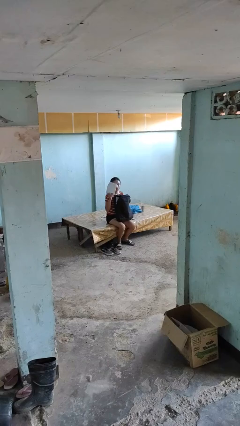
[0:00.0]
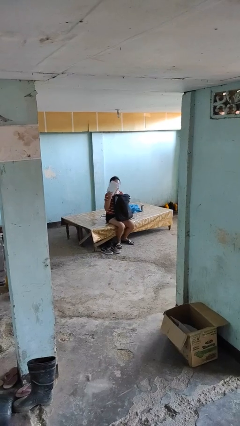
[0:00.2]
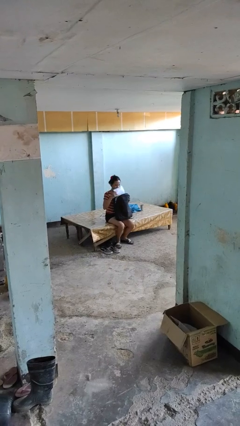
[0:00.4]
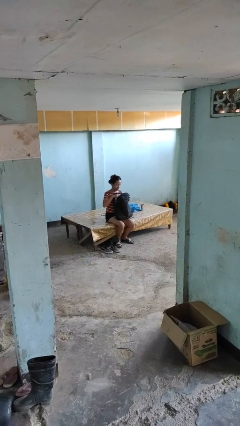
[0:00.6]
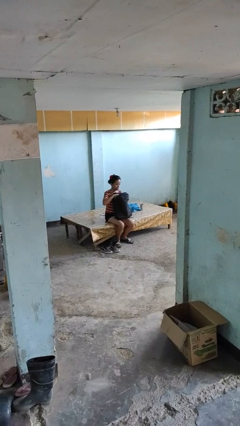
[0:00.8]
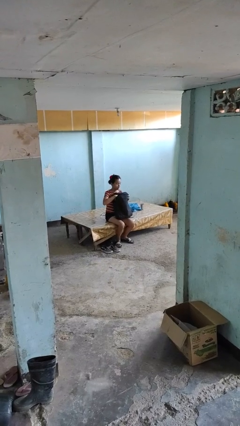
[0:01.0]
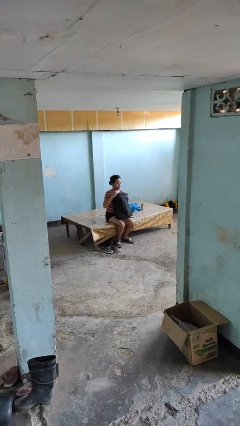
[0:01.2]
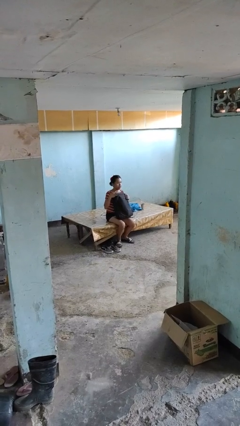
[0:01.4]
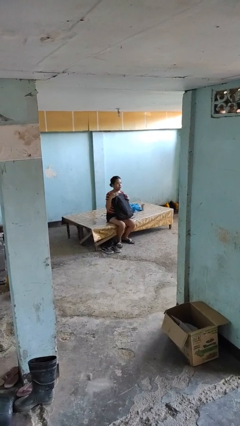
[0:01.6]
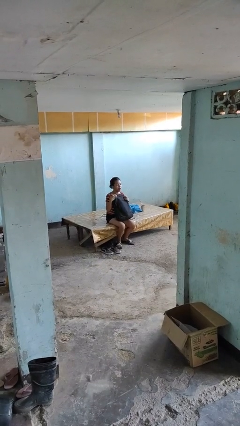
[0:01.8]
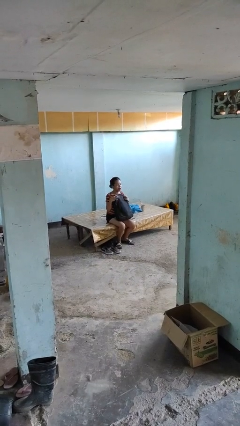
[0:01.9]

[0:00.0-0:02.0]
person puts object into backpack

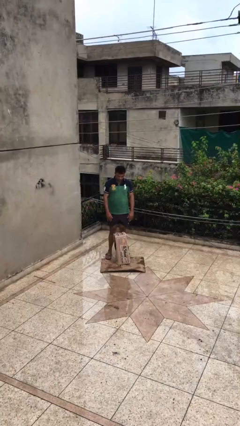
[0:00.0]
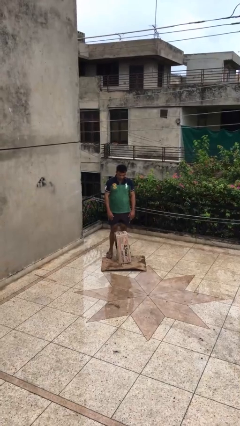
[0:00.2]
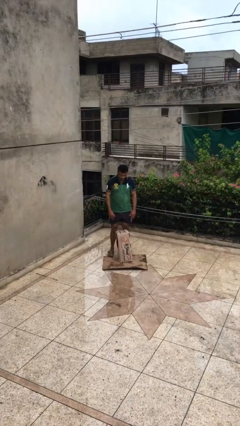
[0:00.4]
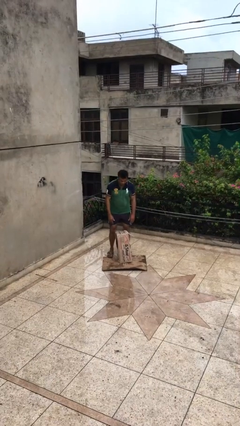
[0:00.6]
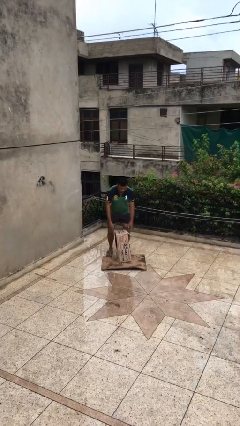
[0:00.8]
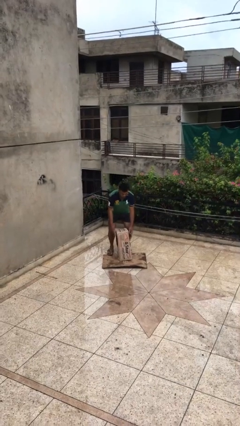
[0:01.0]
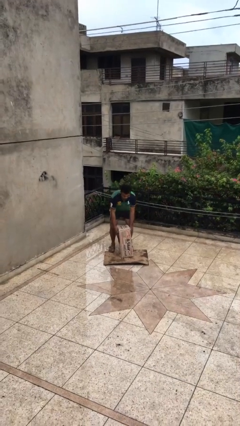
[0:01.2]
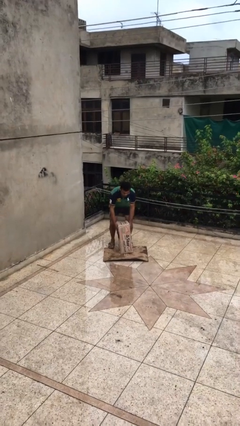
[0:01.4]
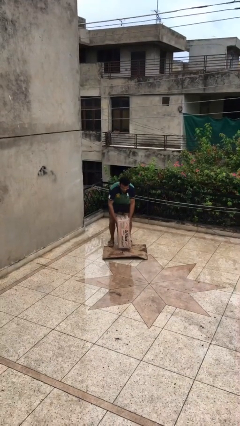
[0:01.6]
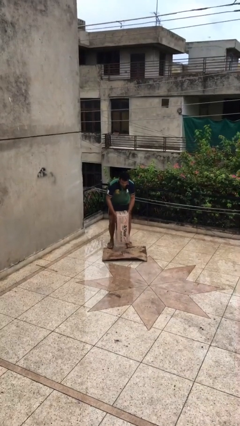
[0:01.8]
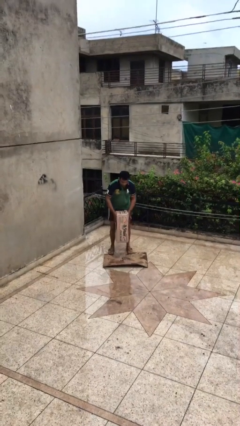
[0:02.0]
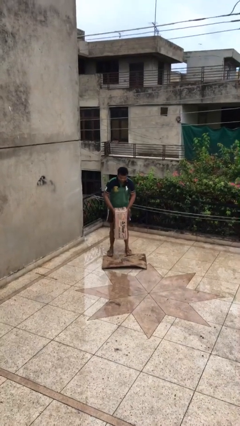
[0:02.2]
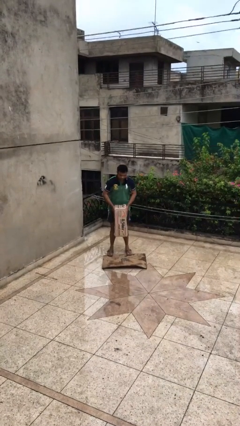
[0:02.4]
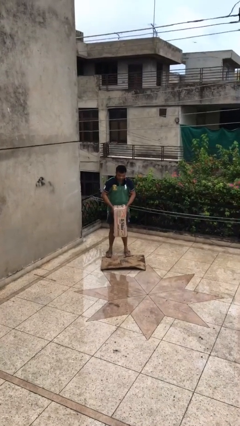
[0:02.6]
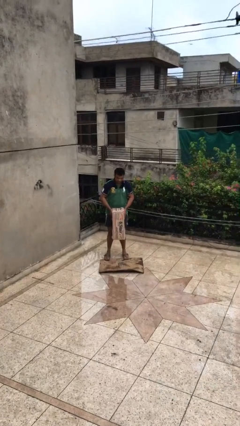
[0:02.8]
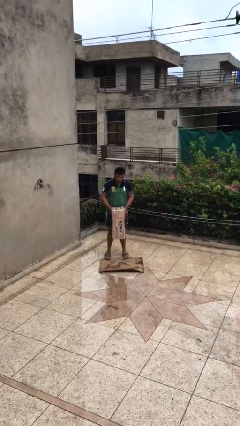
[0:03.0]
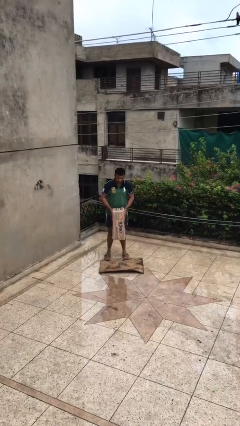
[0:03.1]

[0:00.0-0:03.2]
person picks up object from floor

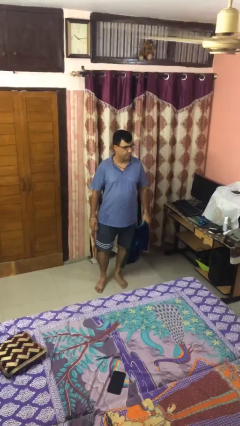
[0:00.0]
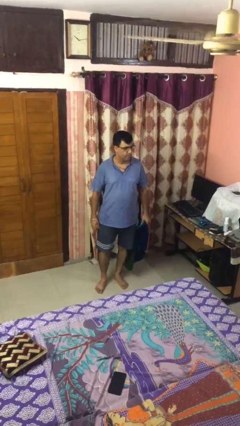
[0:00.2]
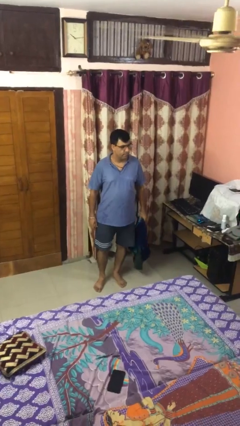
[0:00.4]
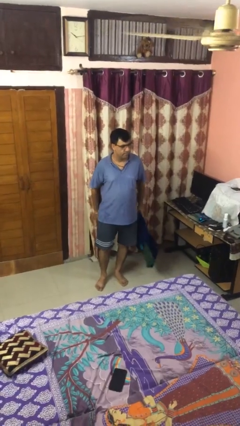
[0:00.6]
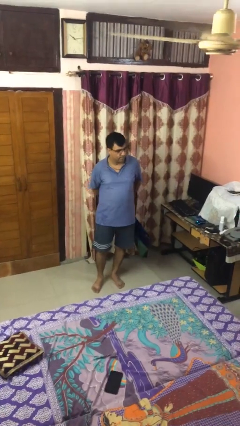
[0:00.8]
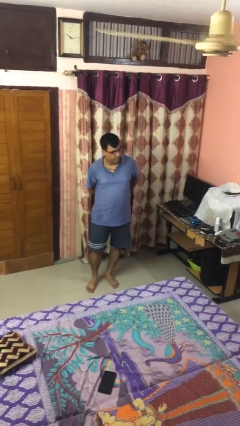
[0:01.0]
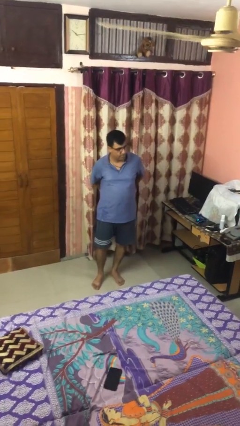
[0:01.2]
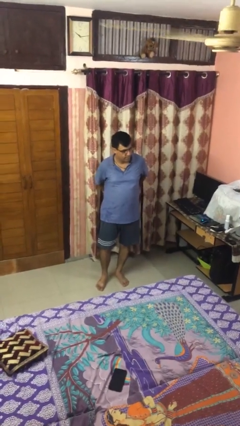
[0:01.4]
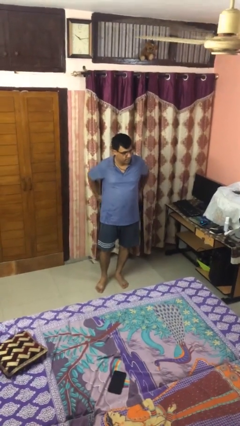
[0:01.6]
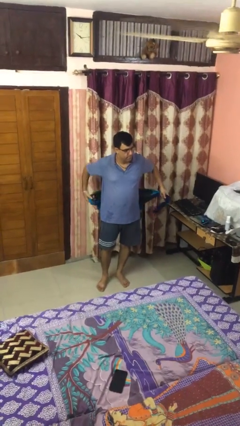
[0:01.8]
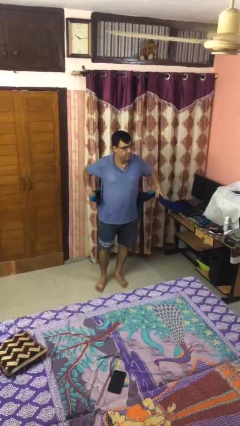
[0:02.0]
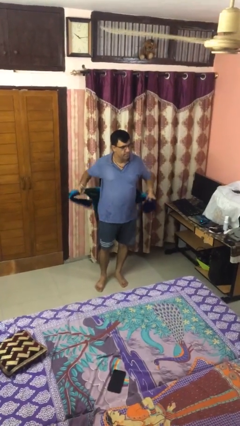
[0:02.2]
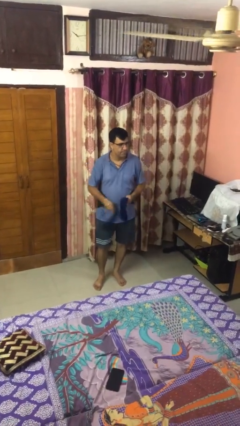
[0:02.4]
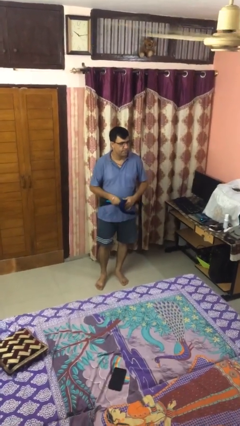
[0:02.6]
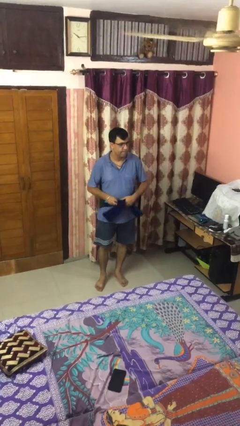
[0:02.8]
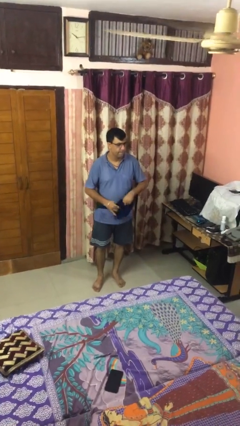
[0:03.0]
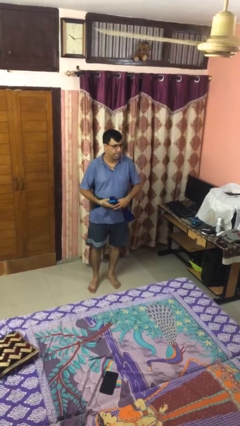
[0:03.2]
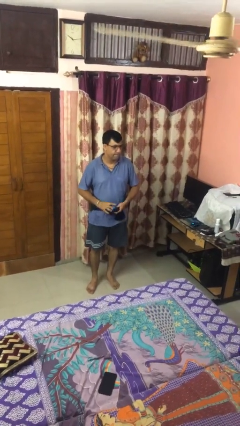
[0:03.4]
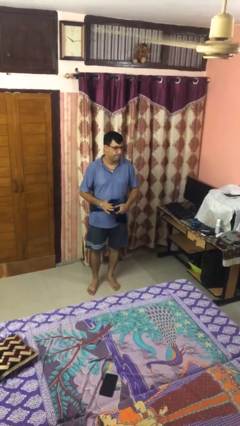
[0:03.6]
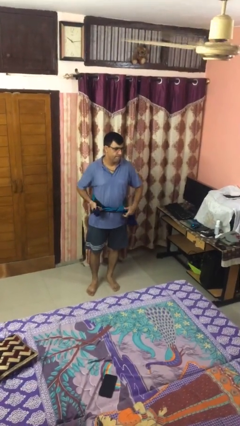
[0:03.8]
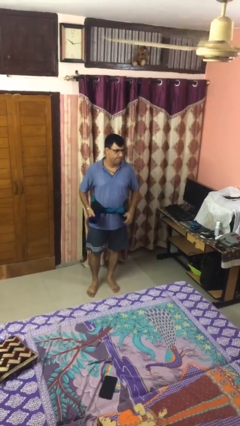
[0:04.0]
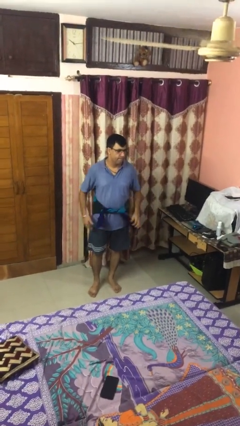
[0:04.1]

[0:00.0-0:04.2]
person ties jacket around waist

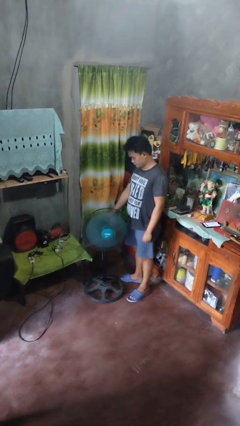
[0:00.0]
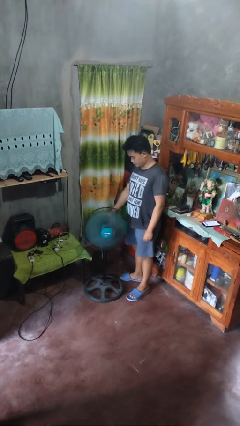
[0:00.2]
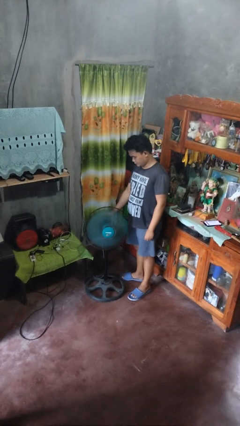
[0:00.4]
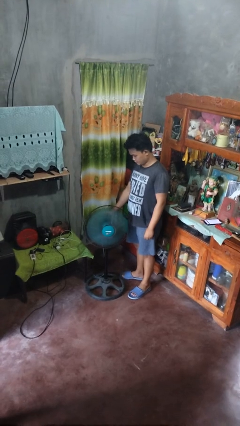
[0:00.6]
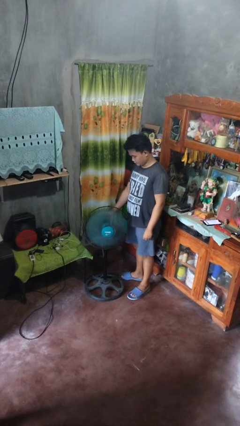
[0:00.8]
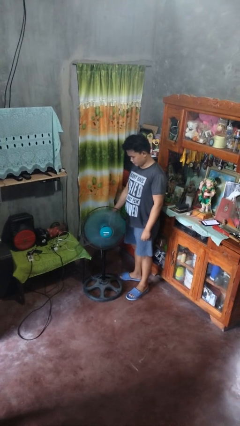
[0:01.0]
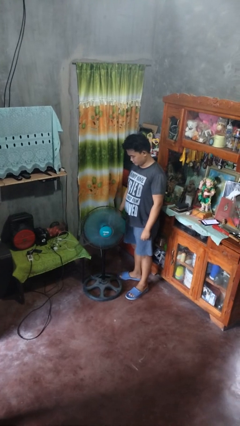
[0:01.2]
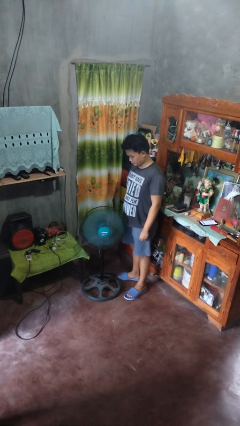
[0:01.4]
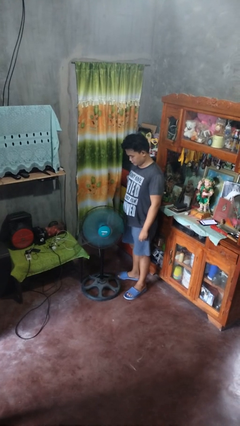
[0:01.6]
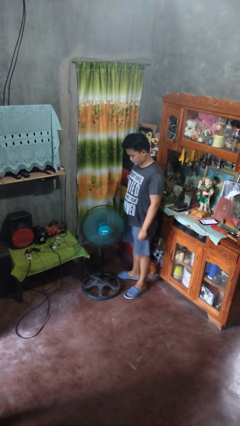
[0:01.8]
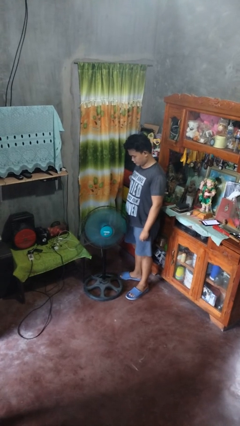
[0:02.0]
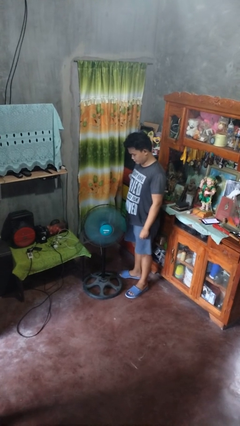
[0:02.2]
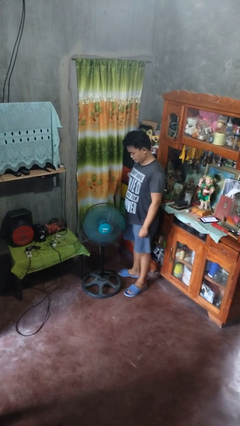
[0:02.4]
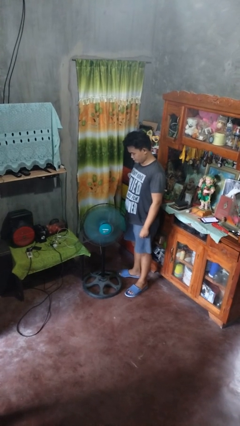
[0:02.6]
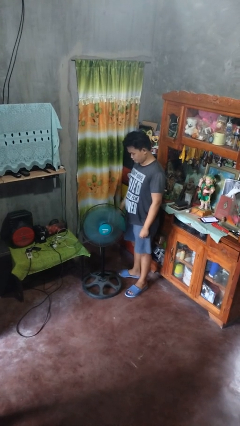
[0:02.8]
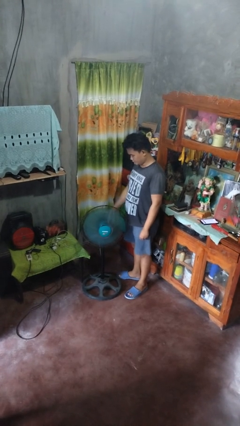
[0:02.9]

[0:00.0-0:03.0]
person turns on fan

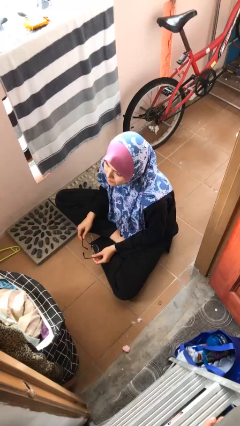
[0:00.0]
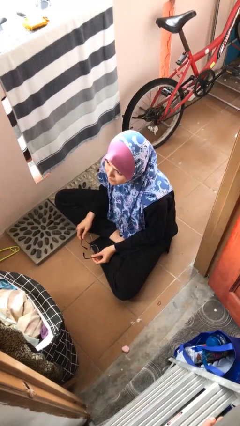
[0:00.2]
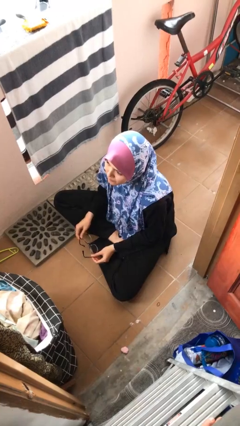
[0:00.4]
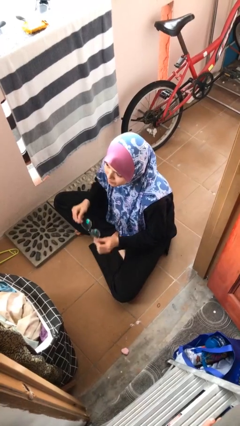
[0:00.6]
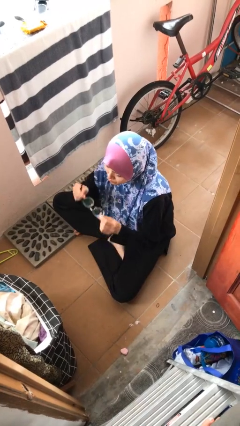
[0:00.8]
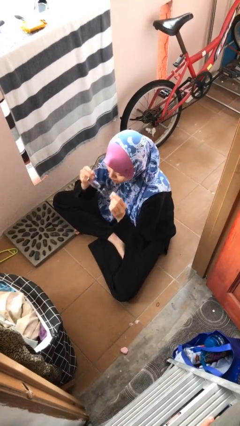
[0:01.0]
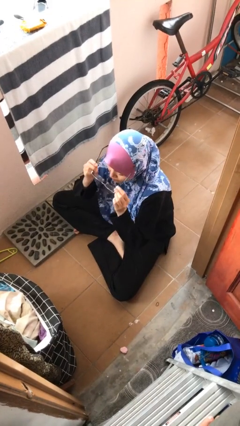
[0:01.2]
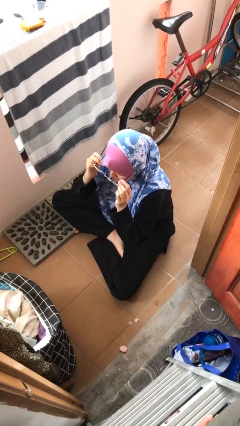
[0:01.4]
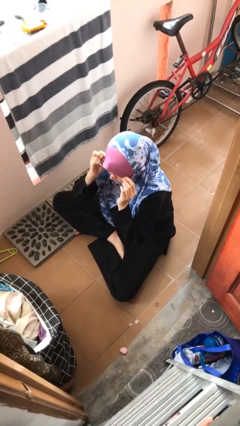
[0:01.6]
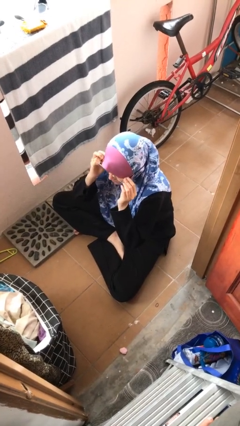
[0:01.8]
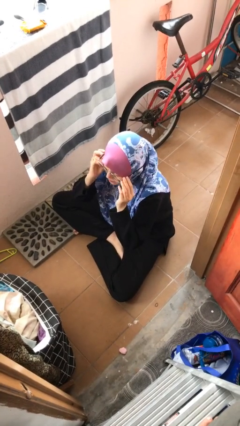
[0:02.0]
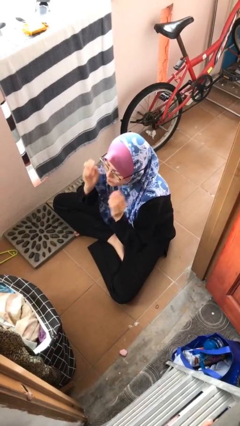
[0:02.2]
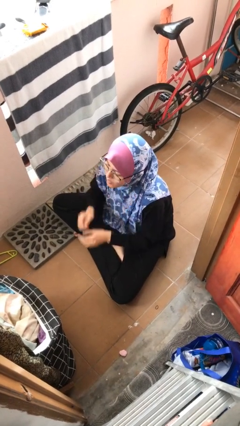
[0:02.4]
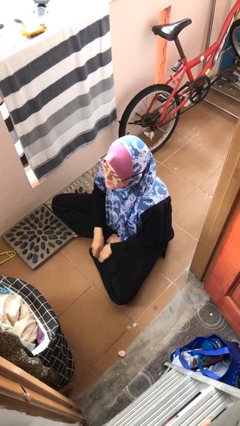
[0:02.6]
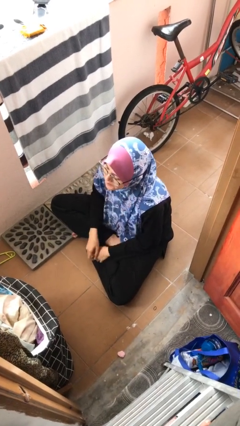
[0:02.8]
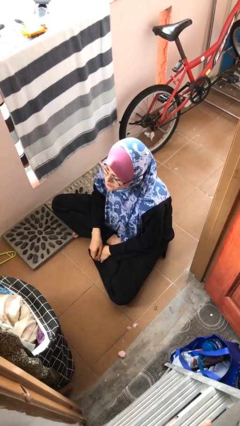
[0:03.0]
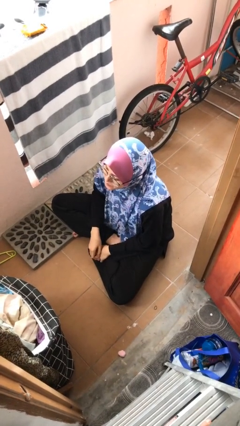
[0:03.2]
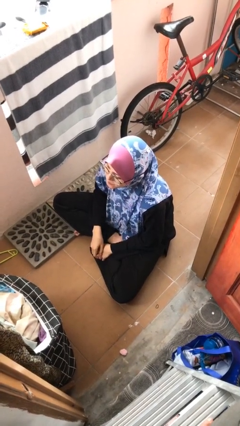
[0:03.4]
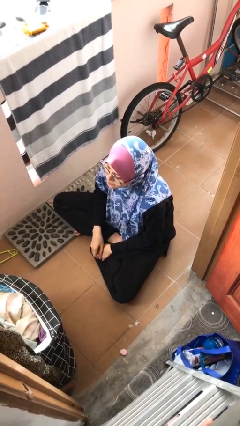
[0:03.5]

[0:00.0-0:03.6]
person puts on glasses

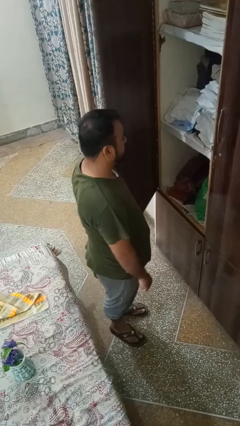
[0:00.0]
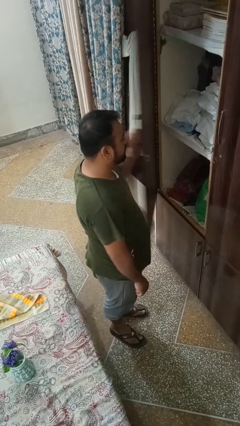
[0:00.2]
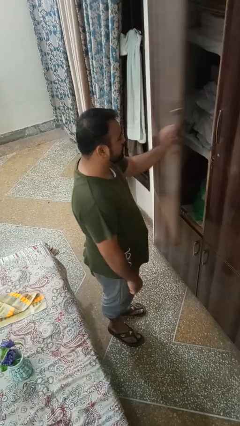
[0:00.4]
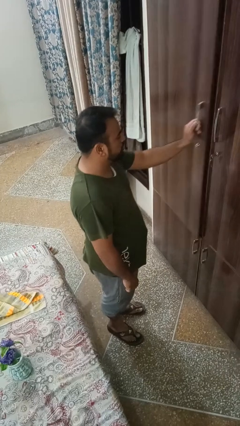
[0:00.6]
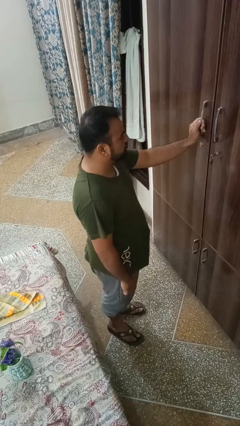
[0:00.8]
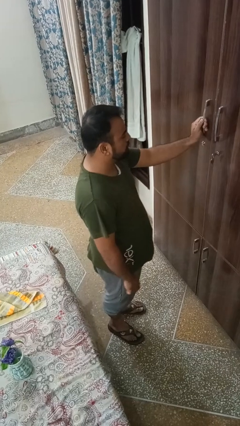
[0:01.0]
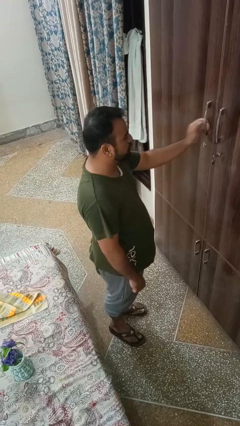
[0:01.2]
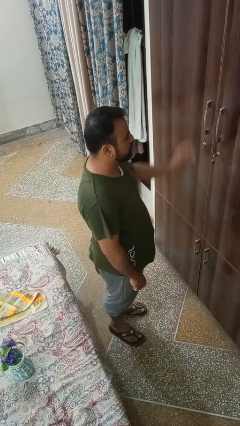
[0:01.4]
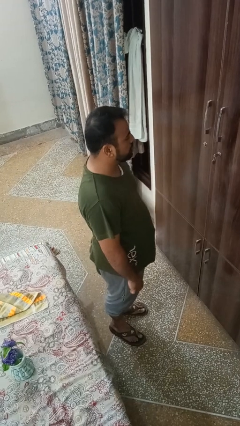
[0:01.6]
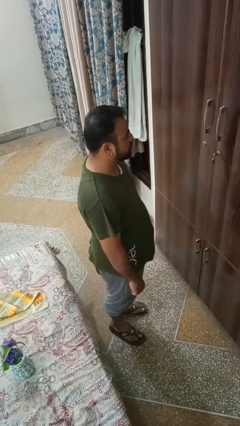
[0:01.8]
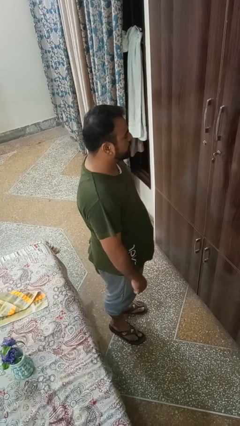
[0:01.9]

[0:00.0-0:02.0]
person closes closet door
